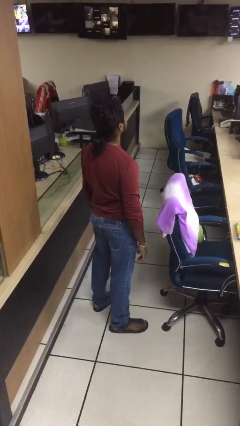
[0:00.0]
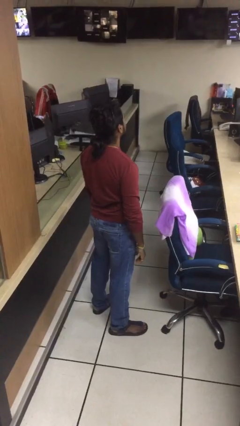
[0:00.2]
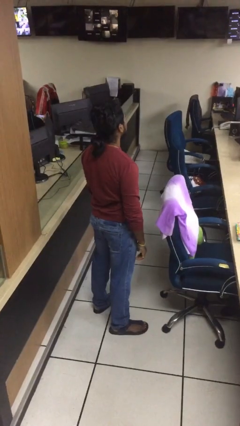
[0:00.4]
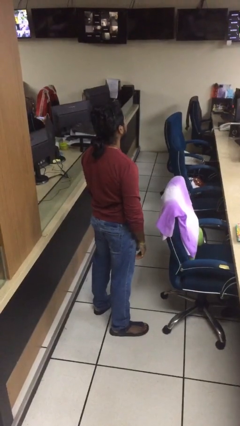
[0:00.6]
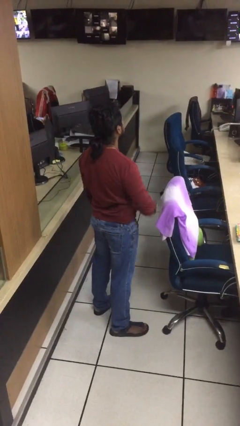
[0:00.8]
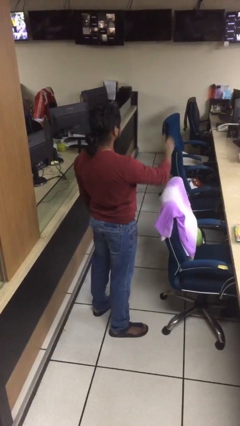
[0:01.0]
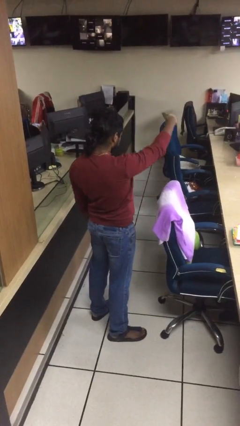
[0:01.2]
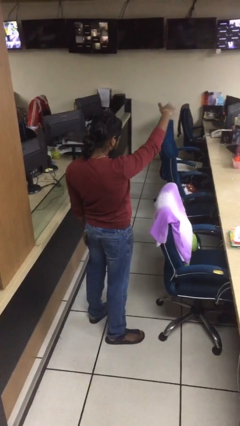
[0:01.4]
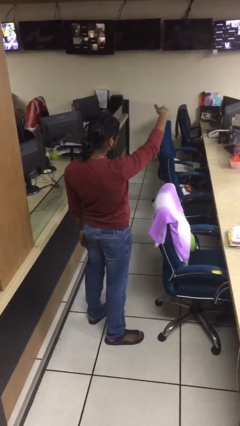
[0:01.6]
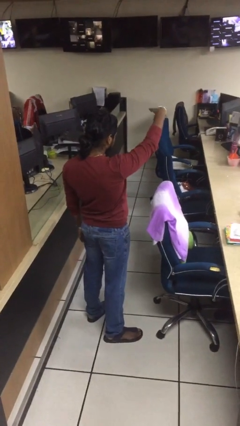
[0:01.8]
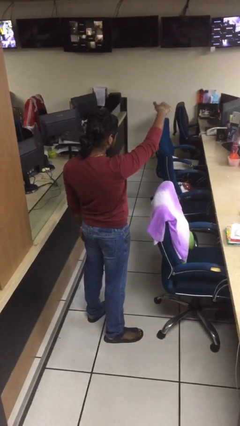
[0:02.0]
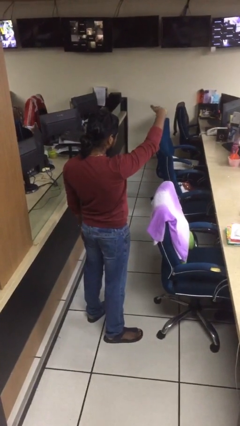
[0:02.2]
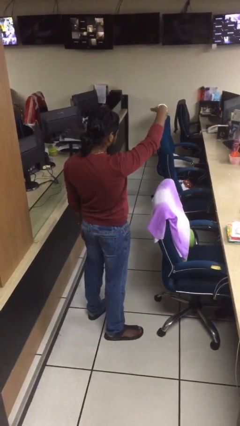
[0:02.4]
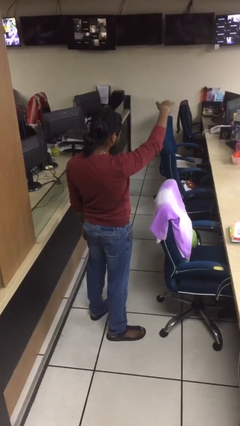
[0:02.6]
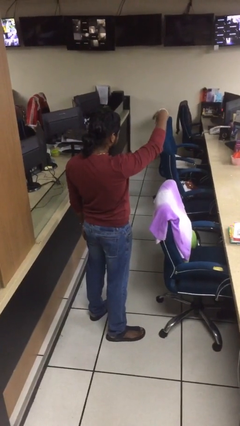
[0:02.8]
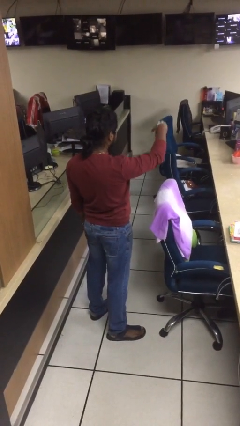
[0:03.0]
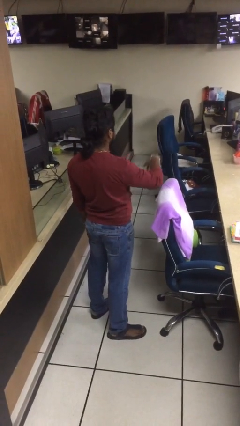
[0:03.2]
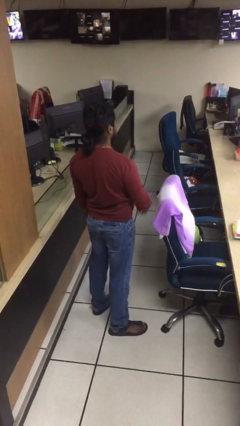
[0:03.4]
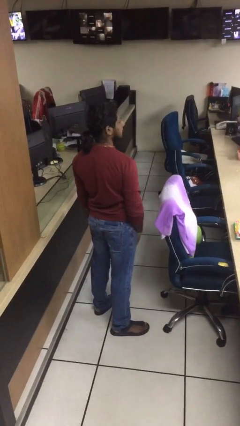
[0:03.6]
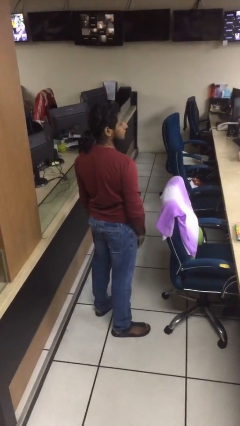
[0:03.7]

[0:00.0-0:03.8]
person gestures come here

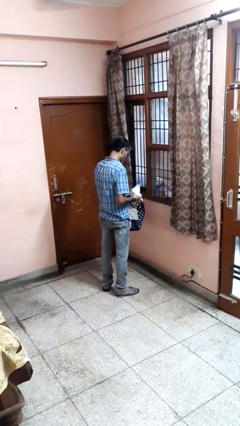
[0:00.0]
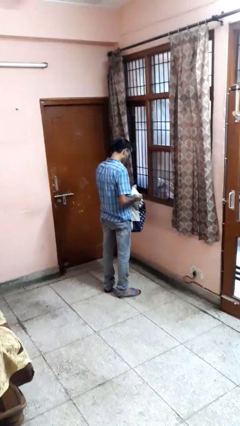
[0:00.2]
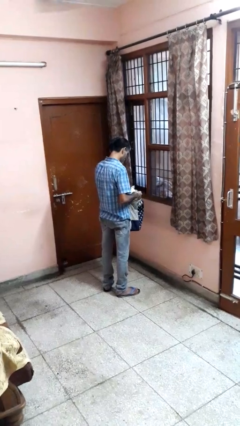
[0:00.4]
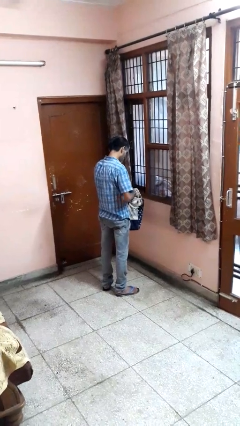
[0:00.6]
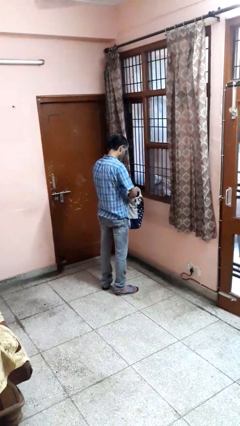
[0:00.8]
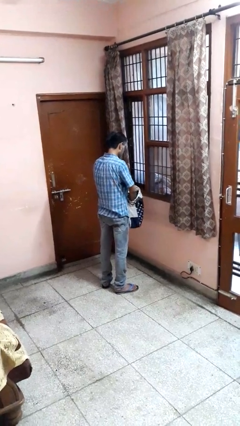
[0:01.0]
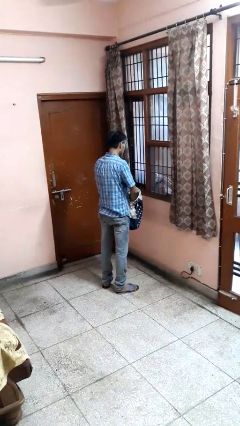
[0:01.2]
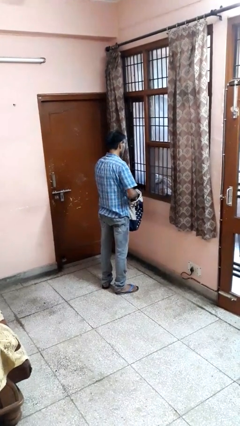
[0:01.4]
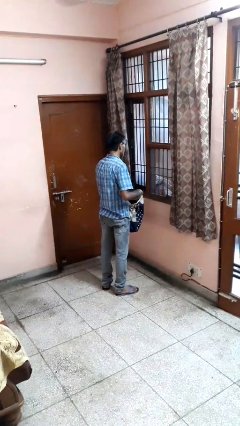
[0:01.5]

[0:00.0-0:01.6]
person puts object into bag

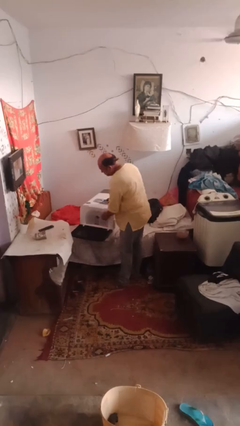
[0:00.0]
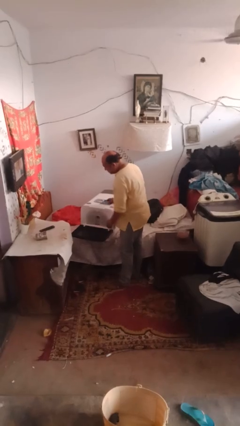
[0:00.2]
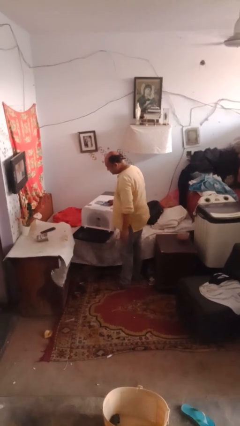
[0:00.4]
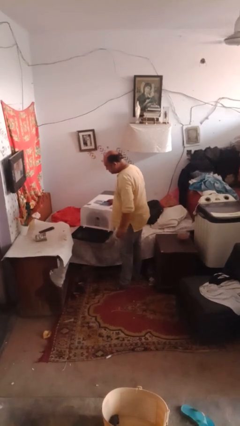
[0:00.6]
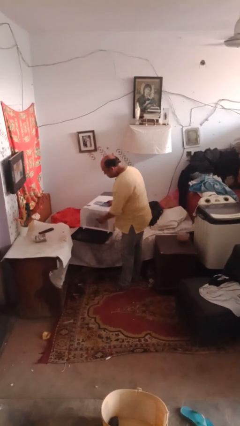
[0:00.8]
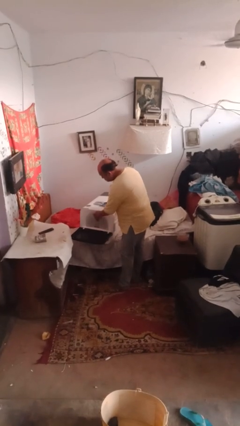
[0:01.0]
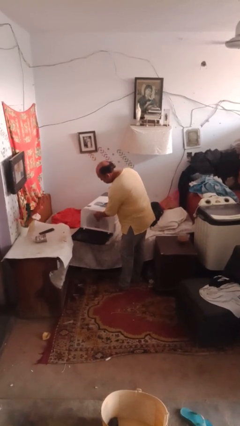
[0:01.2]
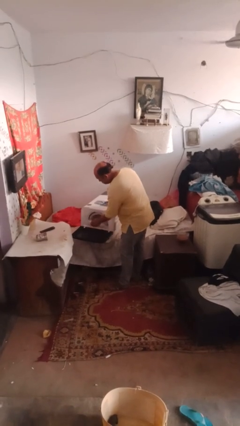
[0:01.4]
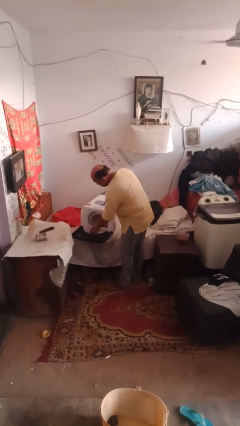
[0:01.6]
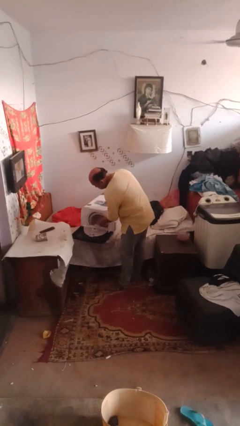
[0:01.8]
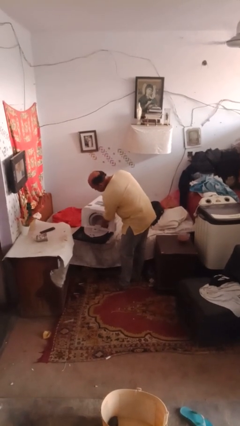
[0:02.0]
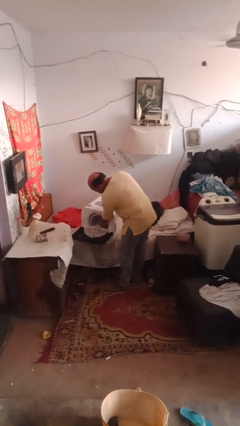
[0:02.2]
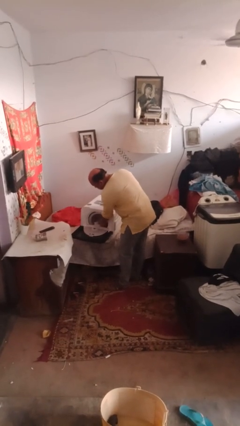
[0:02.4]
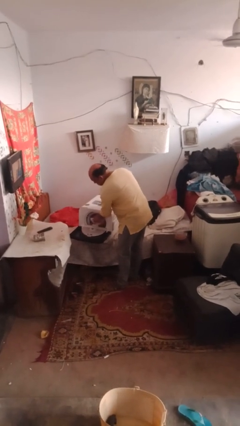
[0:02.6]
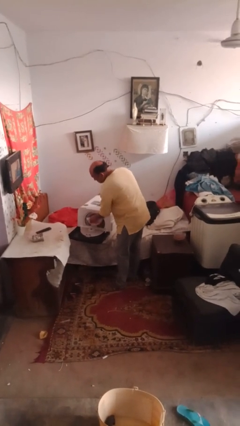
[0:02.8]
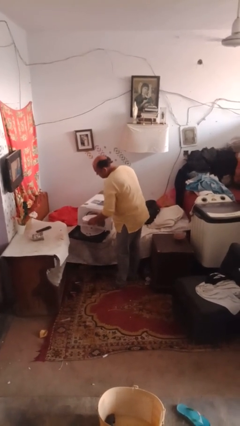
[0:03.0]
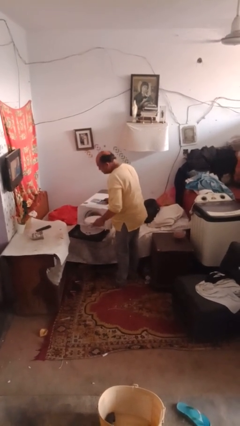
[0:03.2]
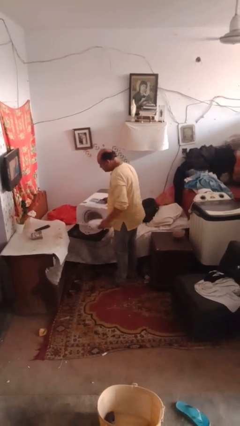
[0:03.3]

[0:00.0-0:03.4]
person unloads dishwasher

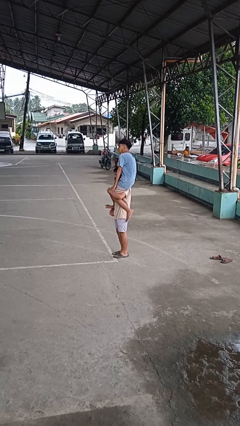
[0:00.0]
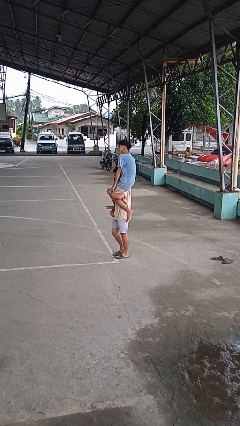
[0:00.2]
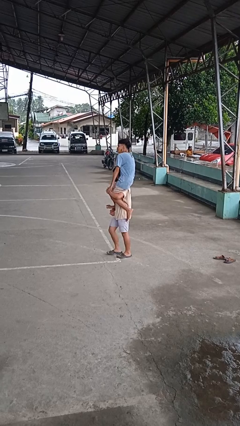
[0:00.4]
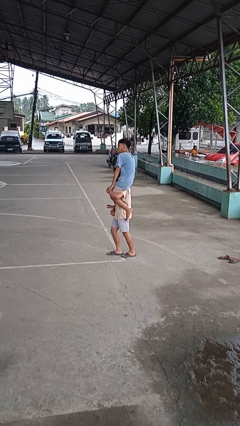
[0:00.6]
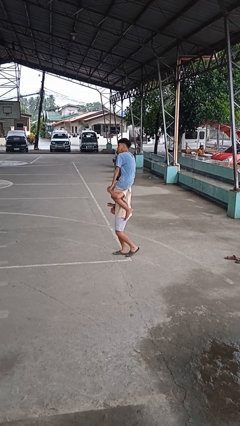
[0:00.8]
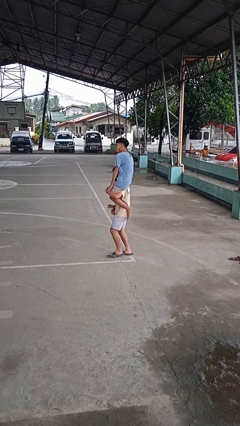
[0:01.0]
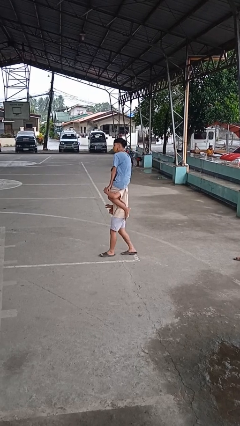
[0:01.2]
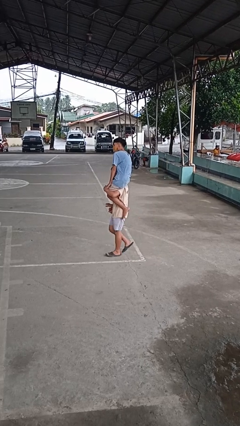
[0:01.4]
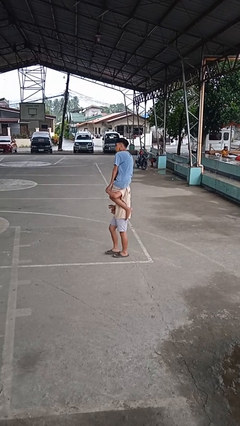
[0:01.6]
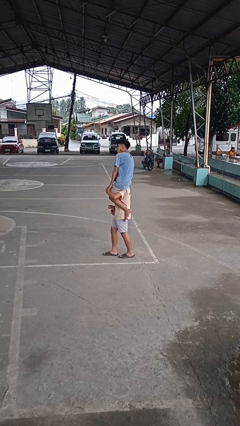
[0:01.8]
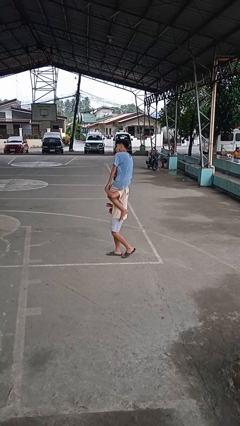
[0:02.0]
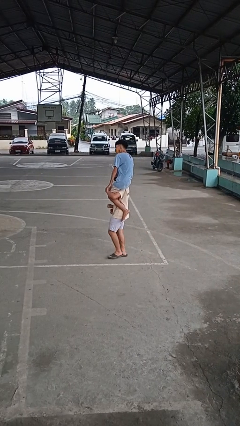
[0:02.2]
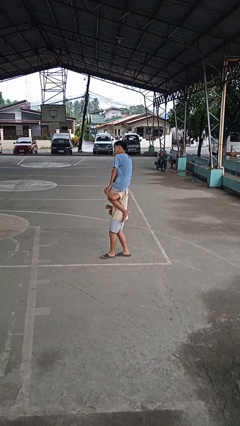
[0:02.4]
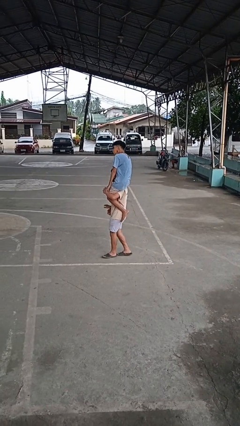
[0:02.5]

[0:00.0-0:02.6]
person carries person on shoulders

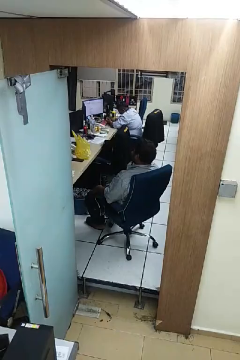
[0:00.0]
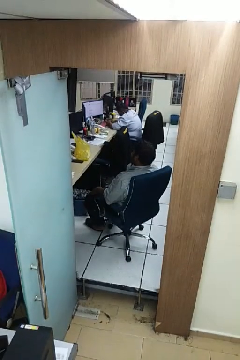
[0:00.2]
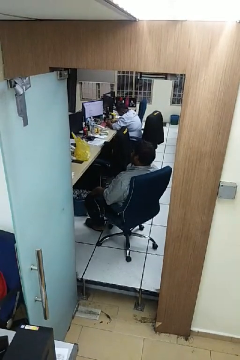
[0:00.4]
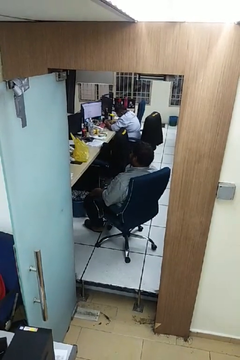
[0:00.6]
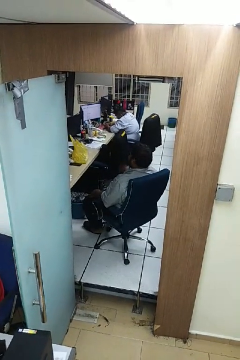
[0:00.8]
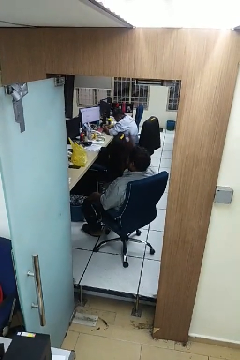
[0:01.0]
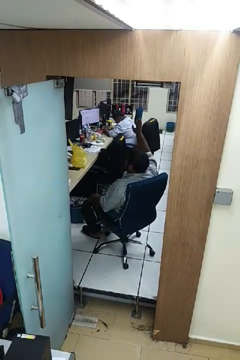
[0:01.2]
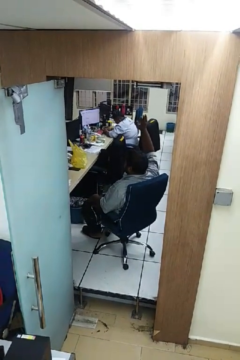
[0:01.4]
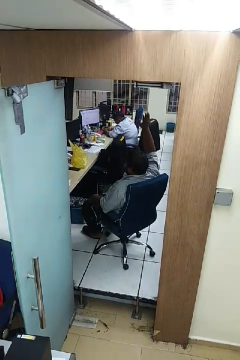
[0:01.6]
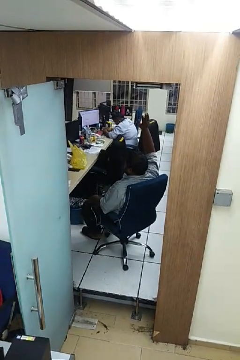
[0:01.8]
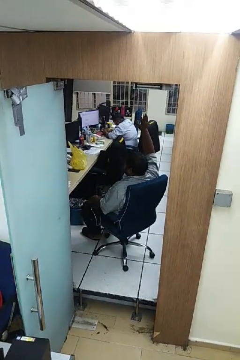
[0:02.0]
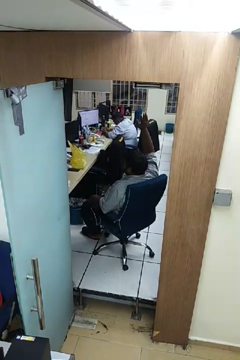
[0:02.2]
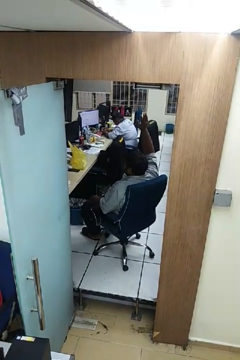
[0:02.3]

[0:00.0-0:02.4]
person gestures raise hand

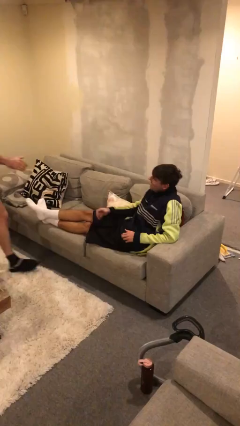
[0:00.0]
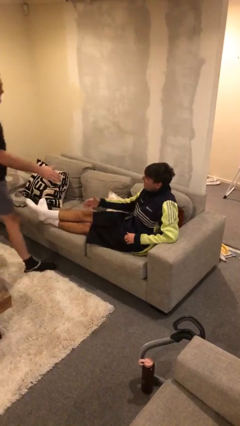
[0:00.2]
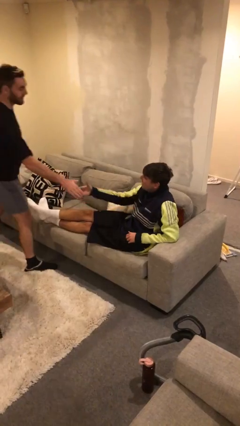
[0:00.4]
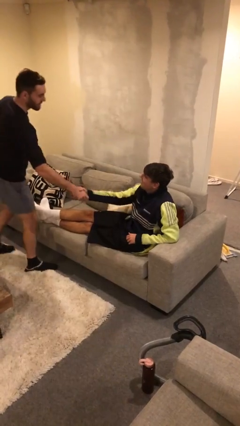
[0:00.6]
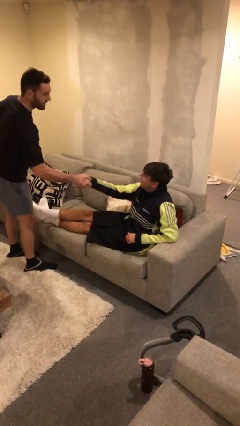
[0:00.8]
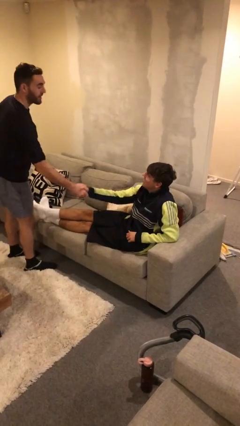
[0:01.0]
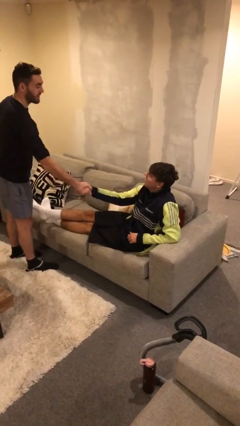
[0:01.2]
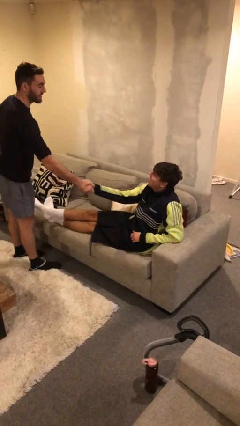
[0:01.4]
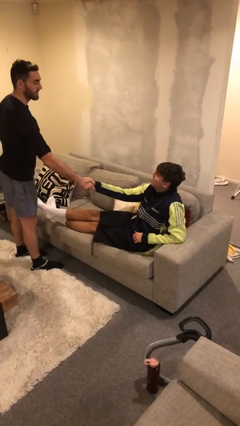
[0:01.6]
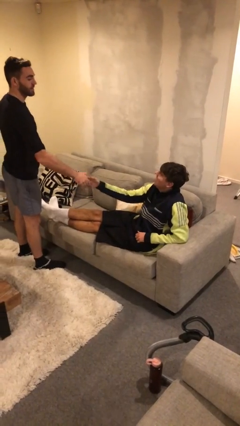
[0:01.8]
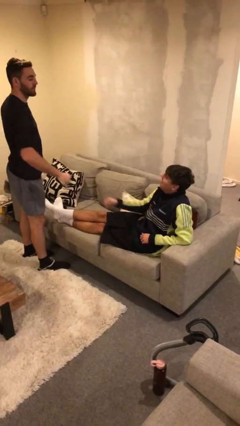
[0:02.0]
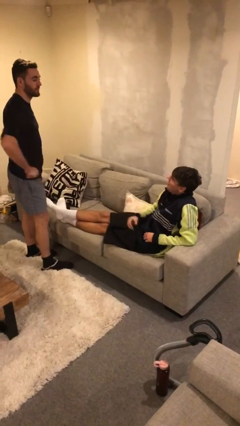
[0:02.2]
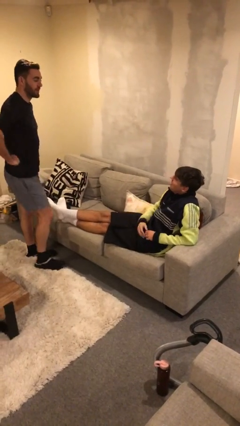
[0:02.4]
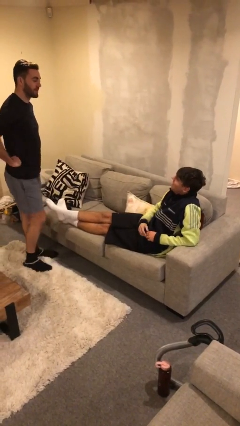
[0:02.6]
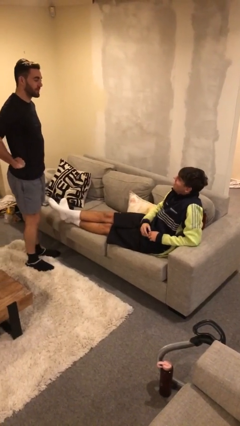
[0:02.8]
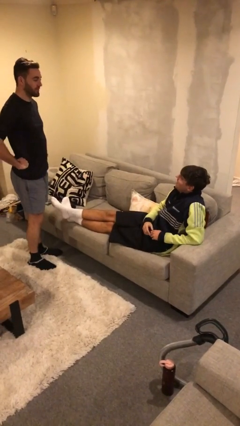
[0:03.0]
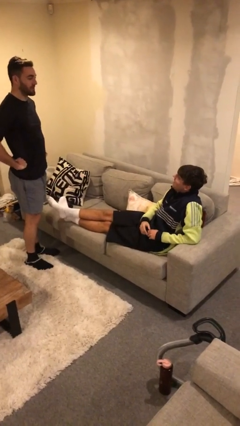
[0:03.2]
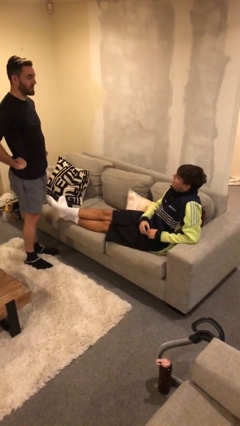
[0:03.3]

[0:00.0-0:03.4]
person shakes hand

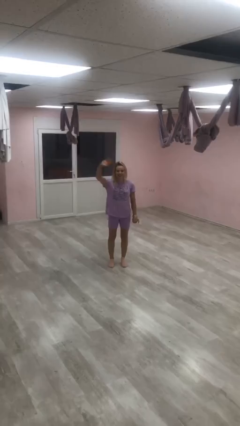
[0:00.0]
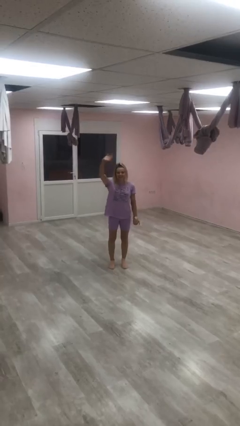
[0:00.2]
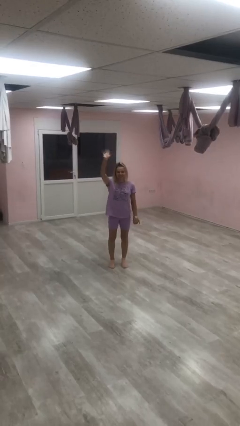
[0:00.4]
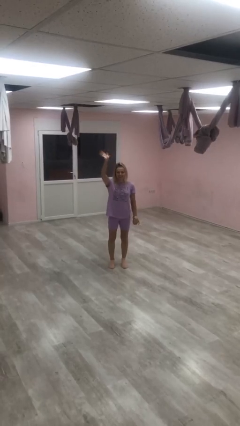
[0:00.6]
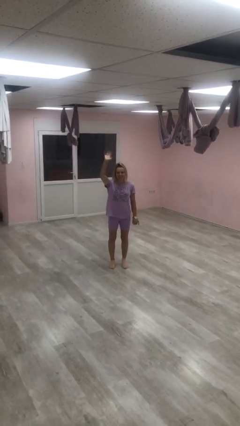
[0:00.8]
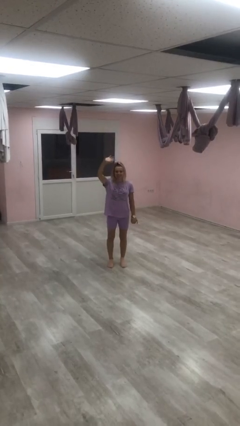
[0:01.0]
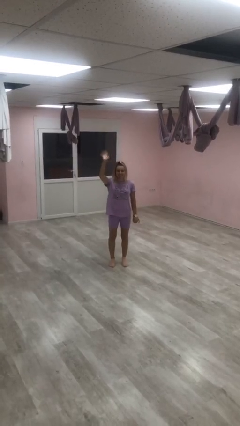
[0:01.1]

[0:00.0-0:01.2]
person waves at person
